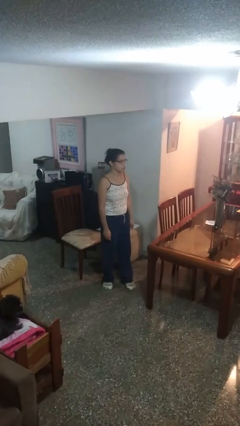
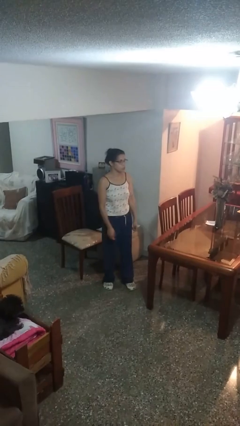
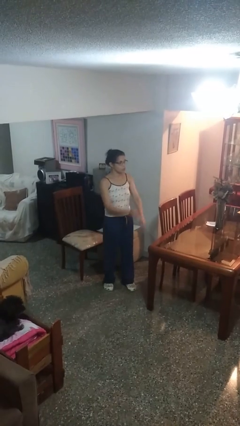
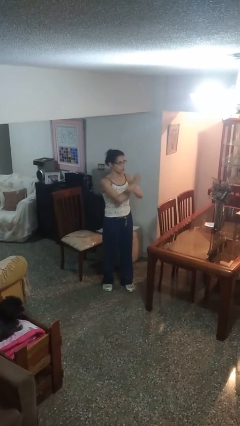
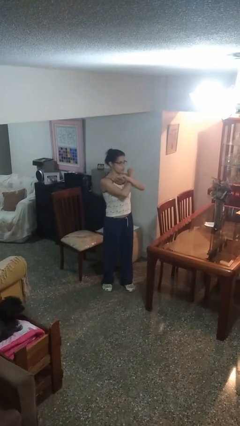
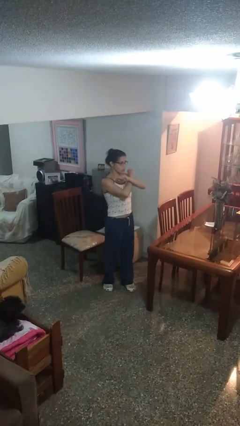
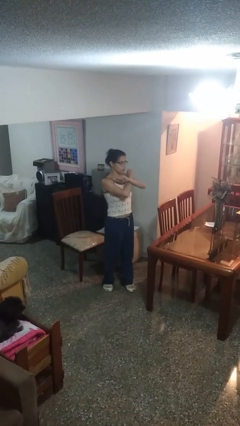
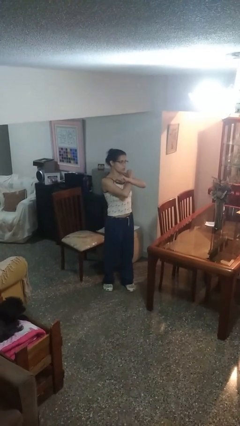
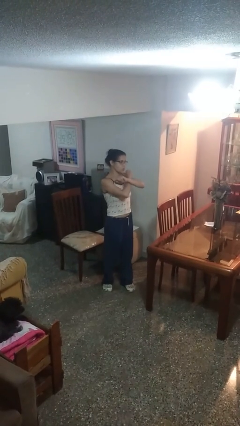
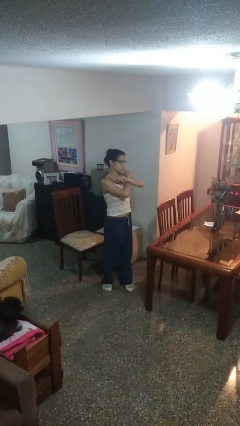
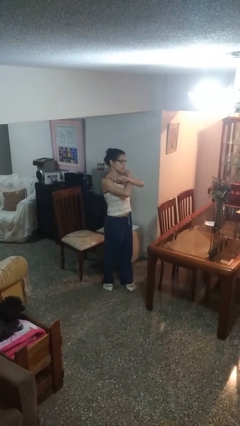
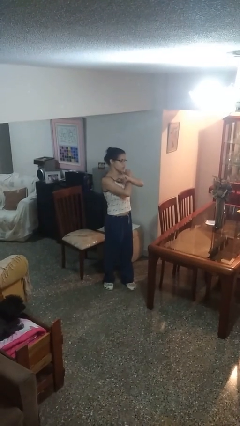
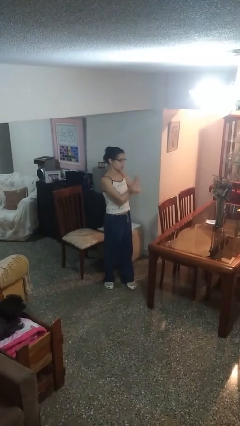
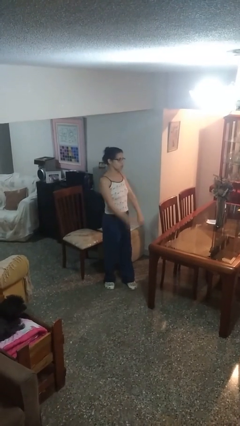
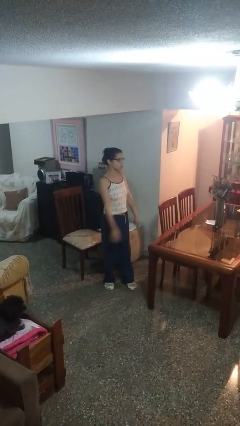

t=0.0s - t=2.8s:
person gestures arms x

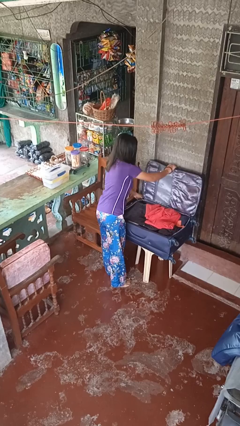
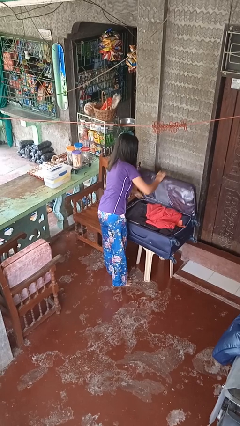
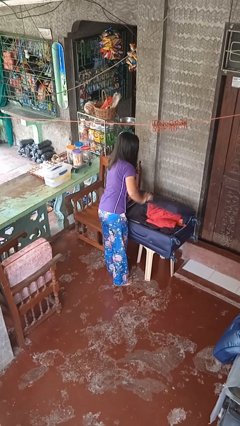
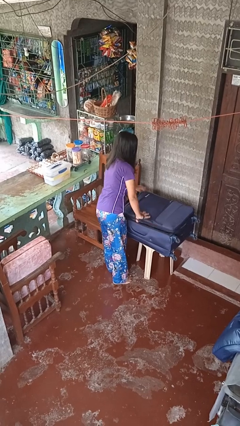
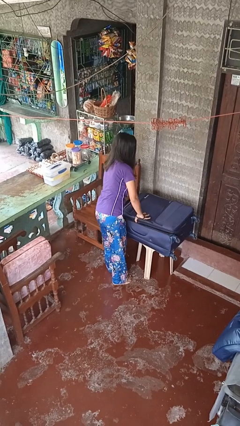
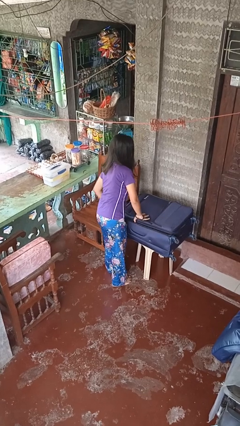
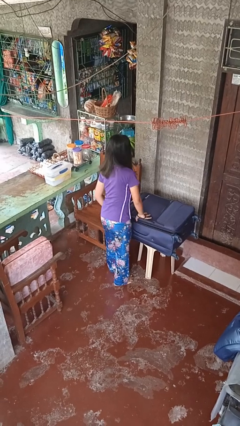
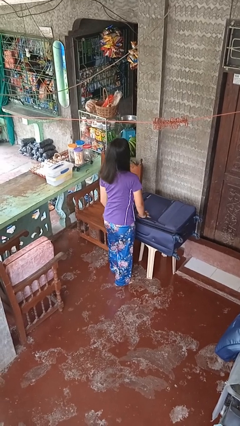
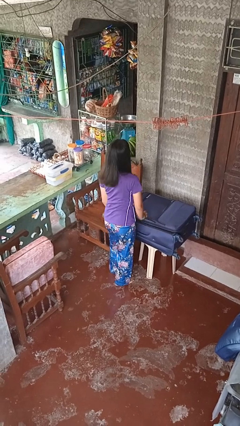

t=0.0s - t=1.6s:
person closes suitcase

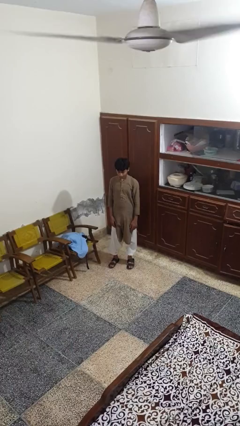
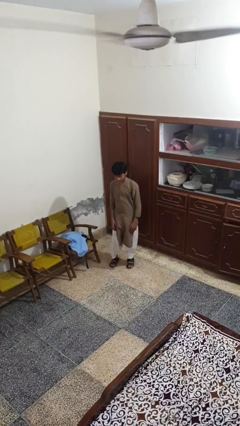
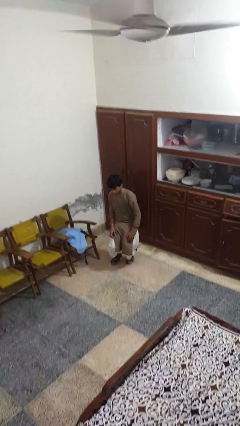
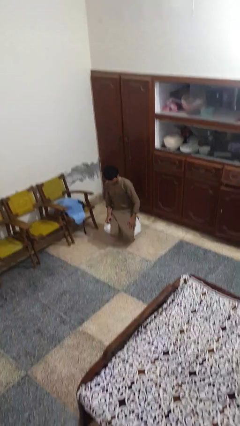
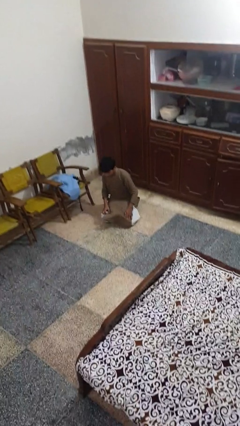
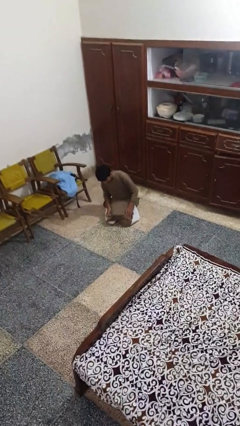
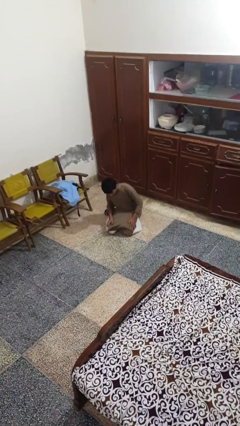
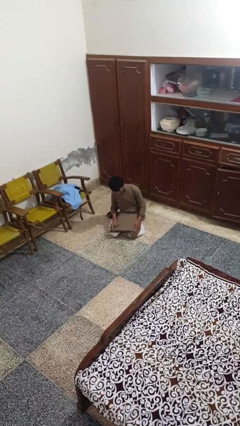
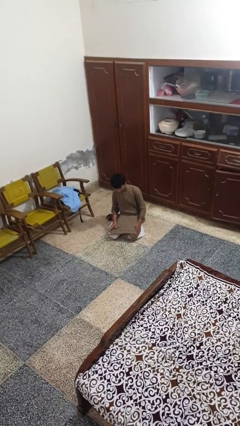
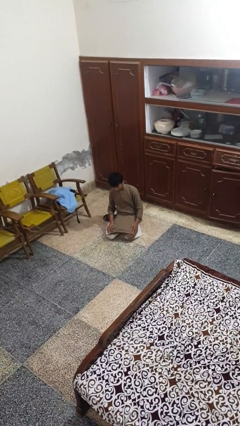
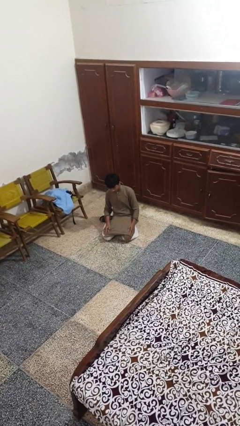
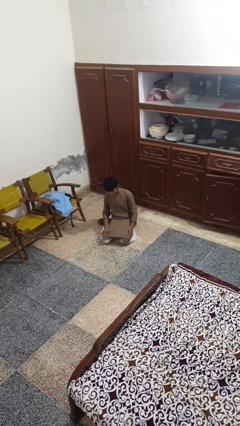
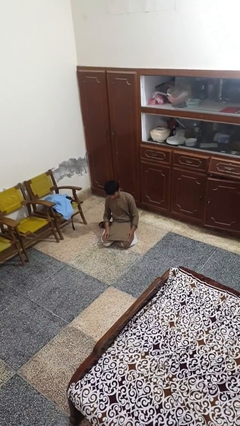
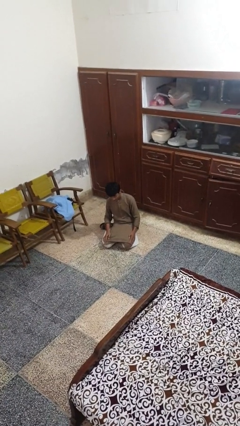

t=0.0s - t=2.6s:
person falls while standing

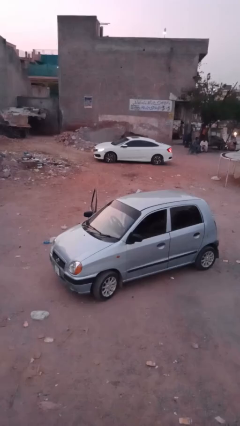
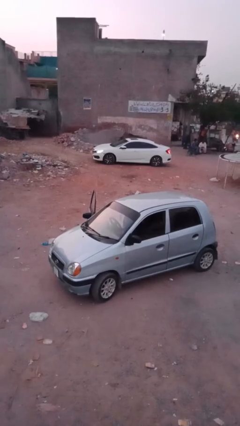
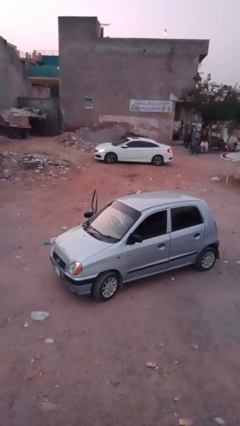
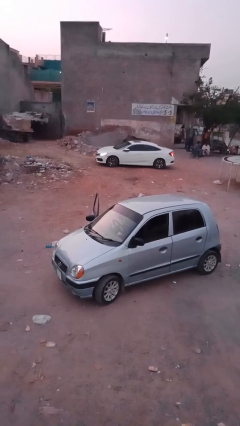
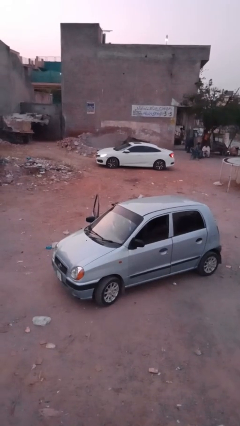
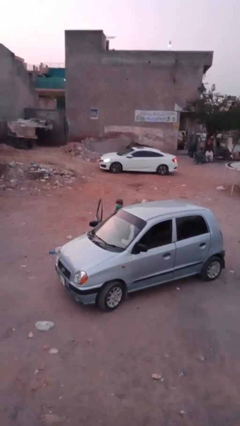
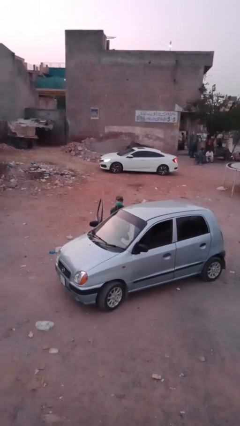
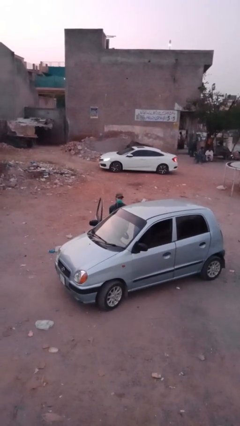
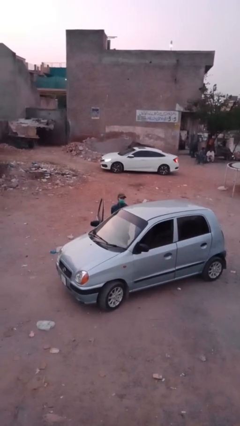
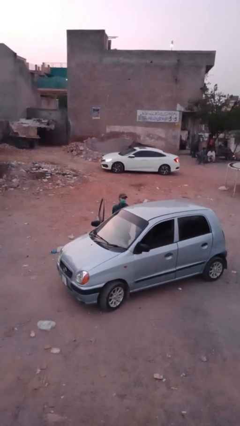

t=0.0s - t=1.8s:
person exits car

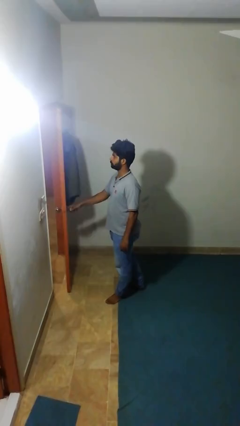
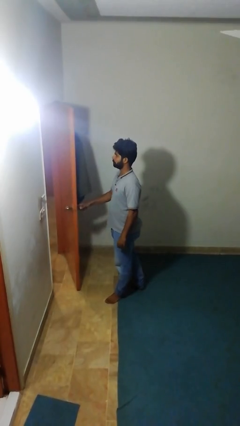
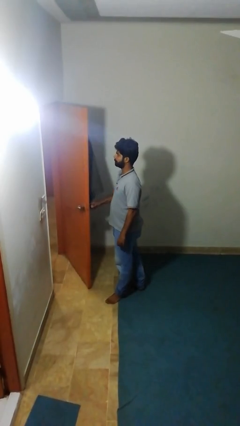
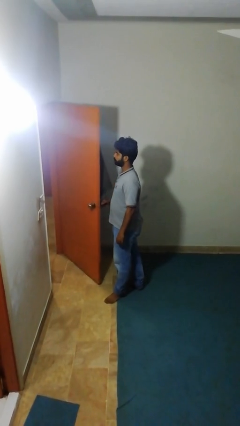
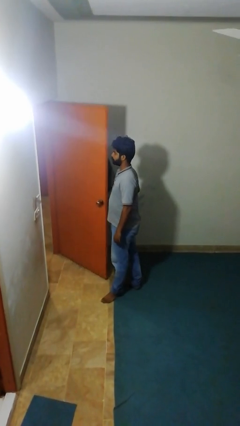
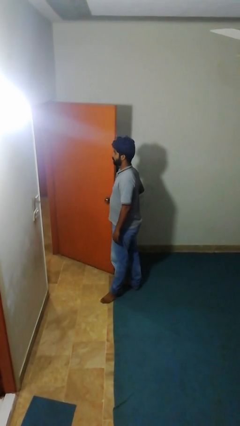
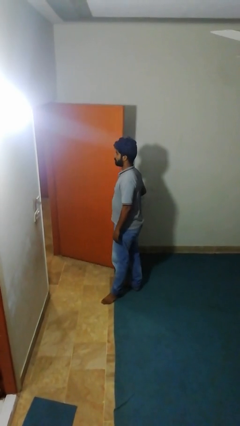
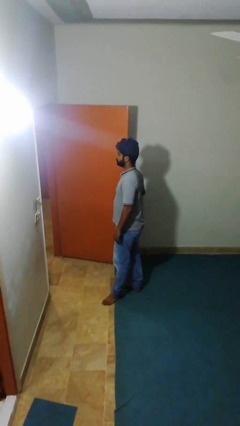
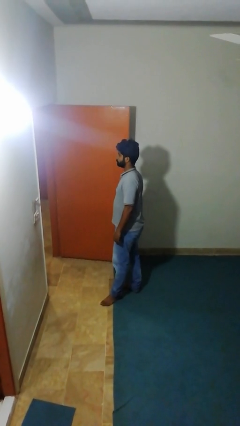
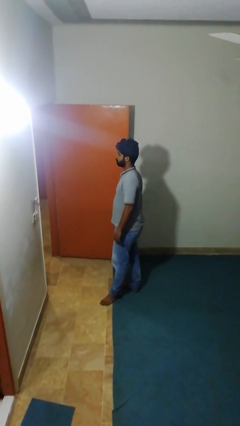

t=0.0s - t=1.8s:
person opens facility door

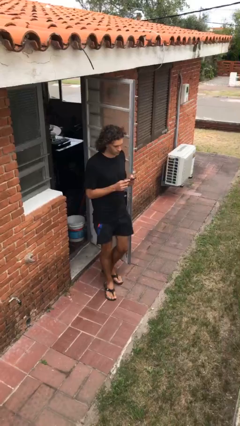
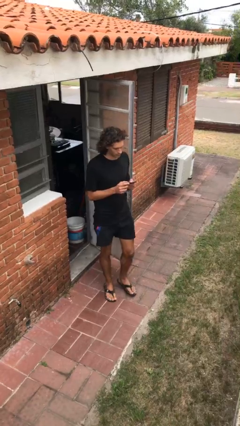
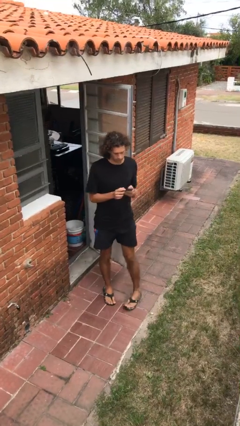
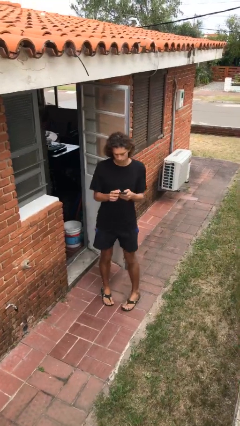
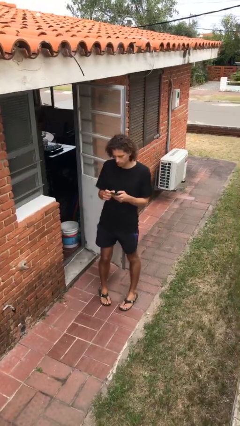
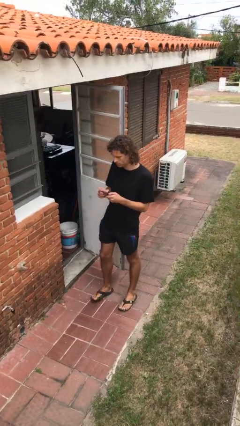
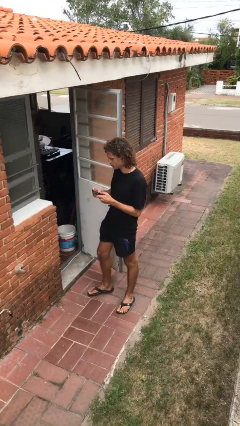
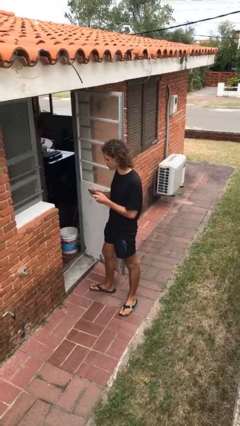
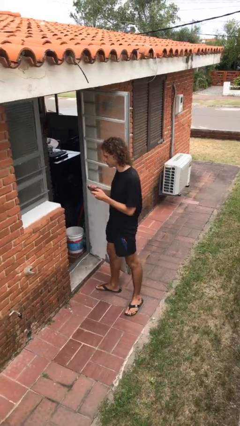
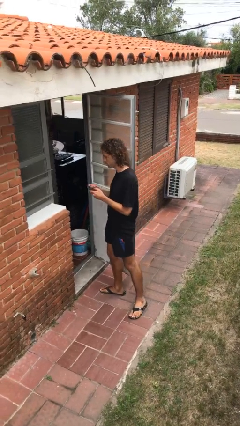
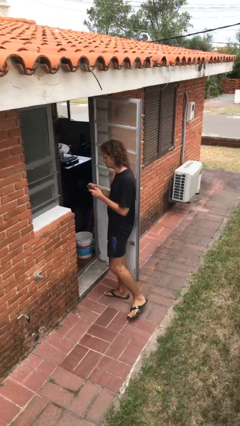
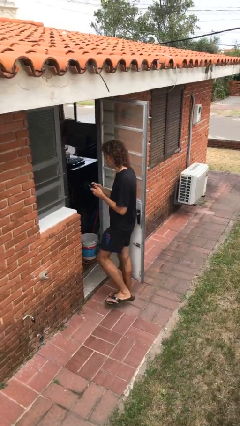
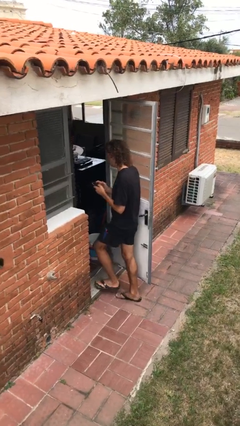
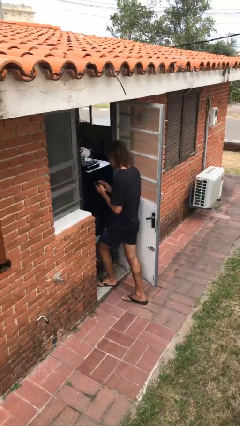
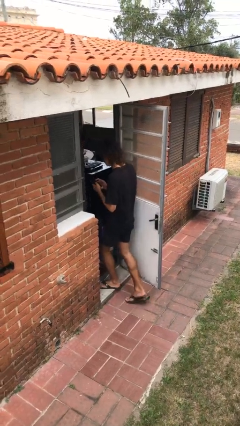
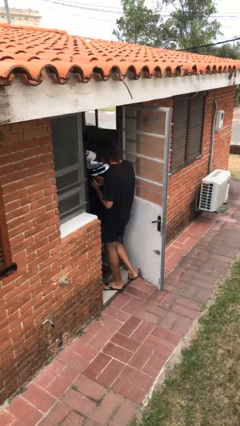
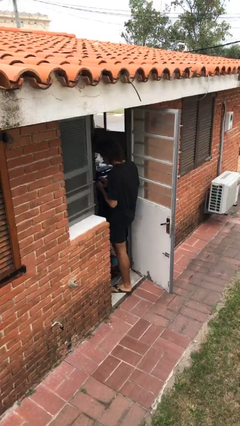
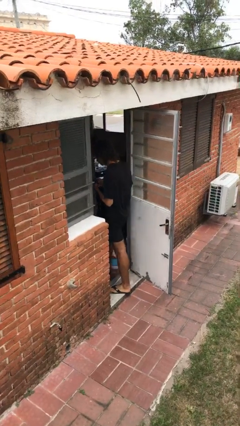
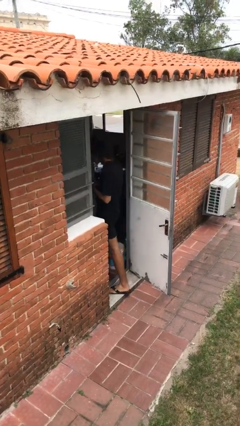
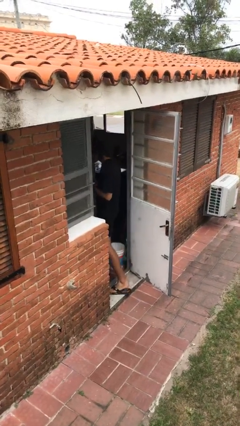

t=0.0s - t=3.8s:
person exits scene through structure

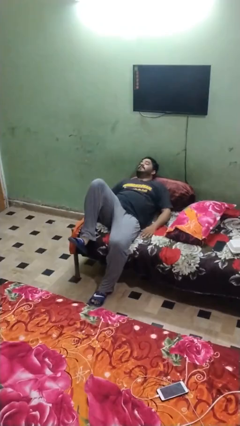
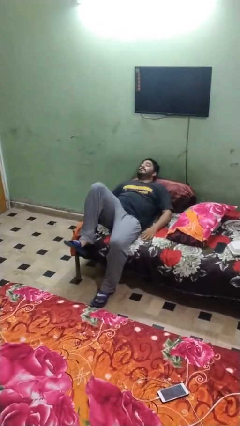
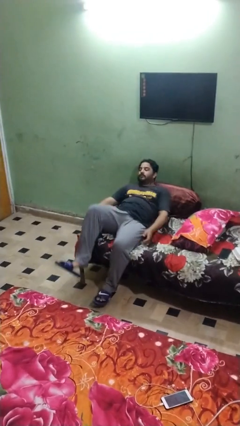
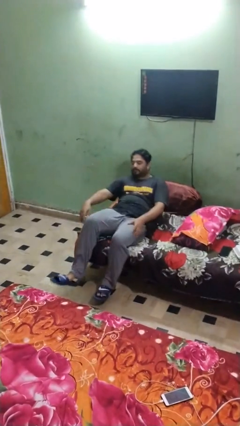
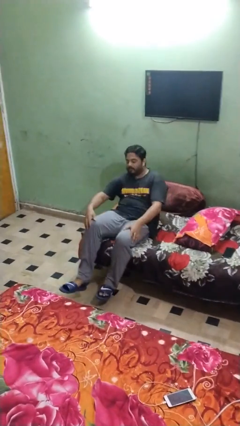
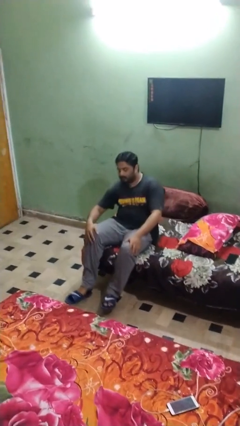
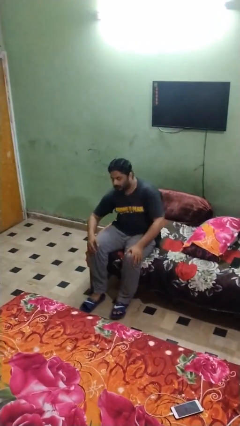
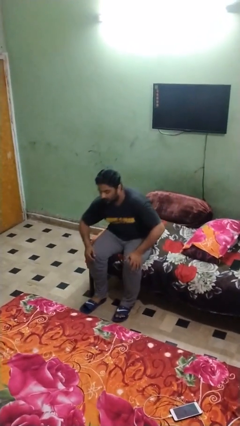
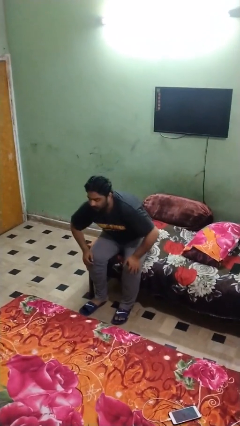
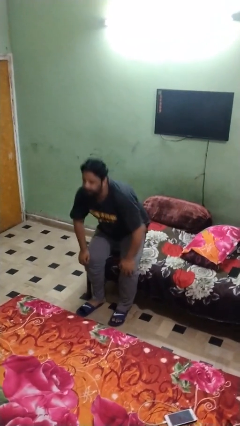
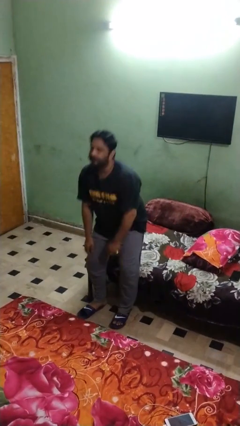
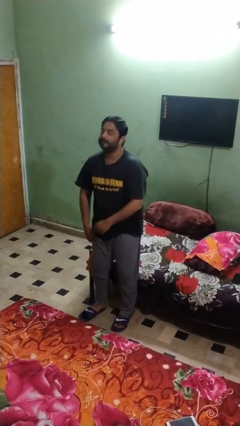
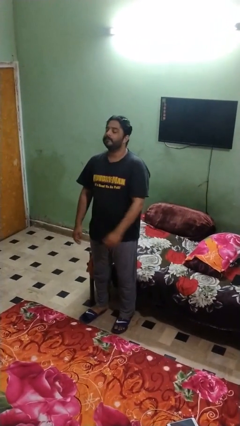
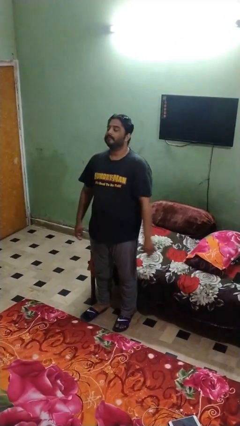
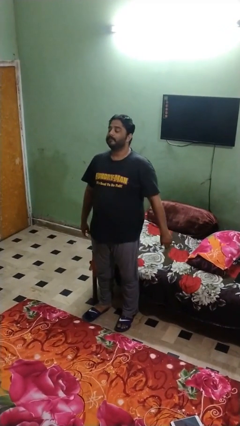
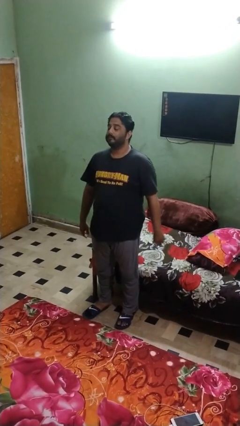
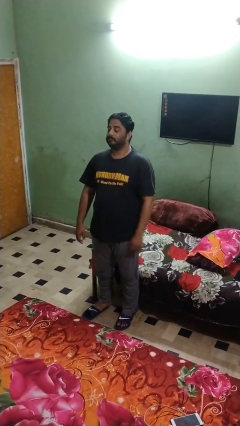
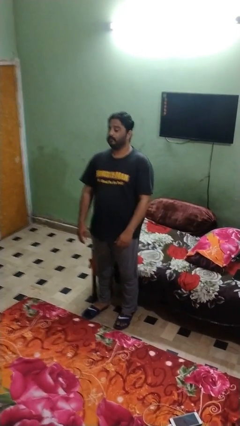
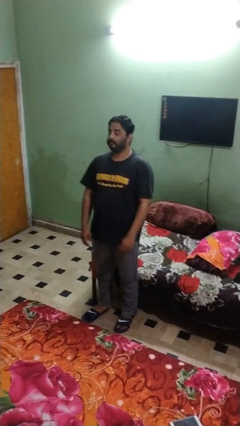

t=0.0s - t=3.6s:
person stands up
